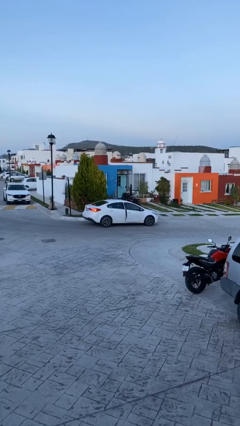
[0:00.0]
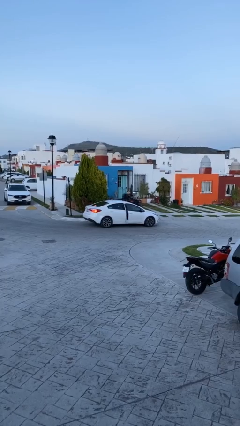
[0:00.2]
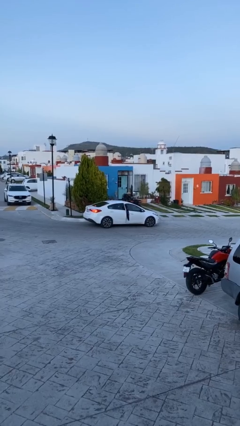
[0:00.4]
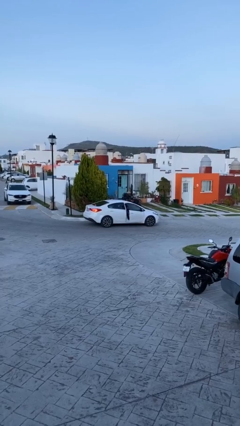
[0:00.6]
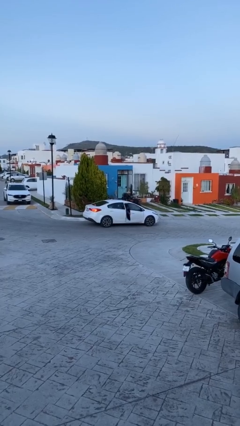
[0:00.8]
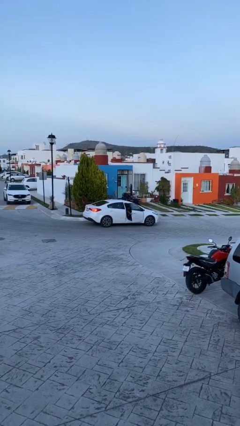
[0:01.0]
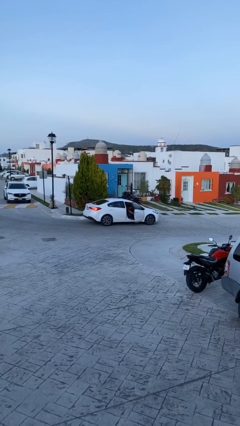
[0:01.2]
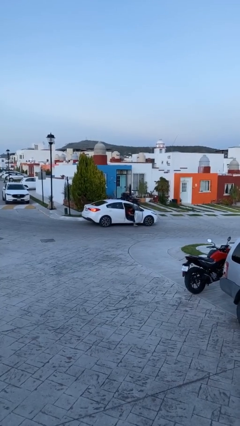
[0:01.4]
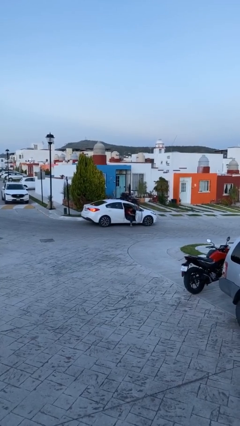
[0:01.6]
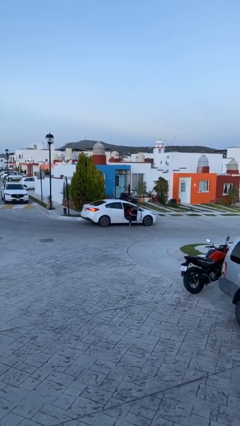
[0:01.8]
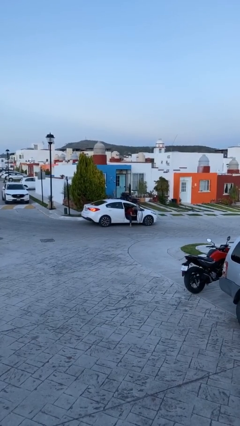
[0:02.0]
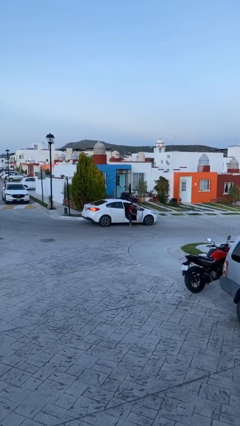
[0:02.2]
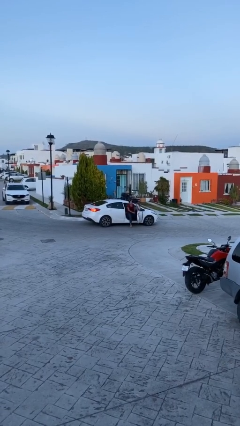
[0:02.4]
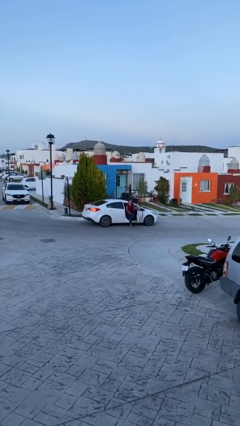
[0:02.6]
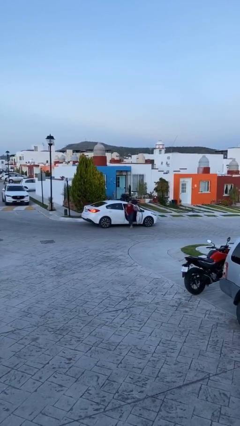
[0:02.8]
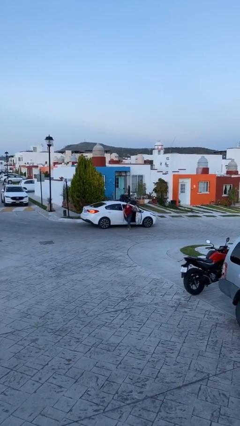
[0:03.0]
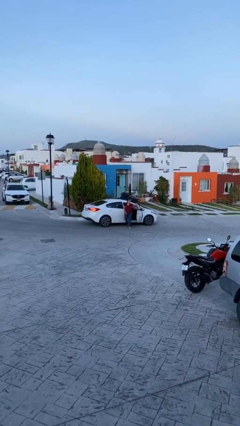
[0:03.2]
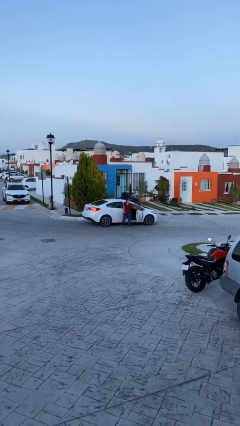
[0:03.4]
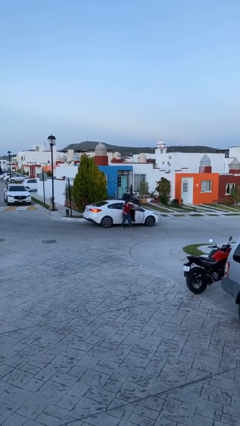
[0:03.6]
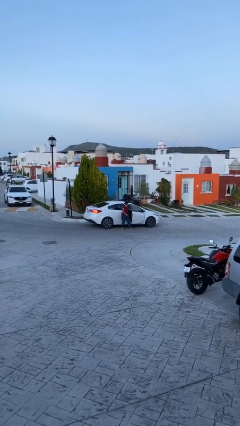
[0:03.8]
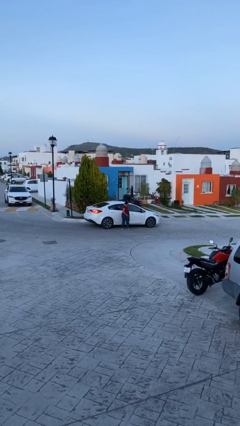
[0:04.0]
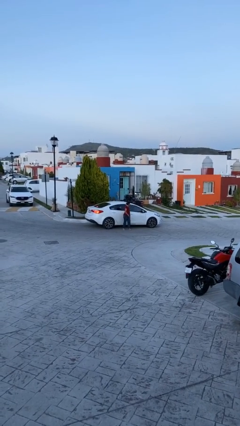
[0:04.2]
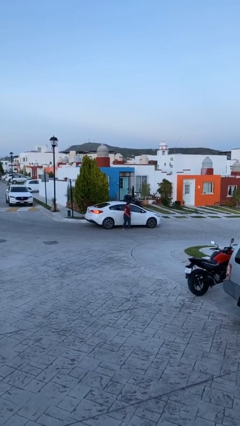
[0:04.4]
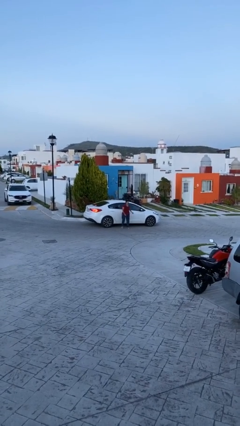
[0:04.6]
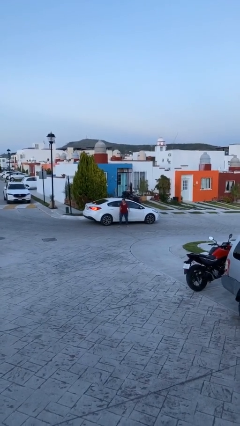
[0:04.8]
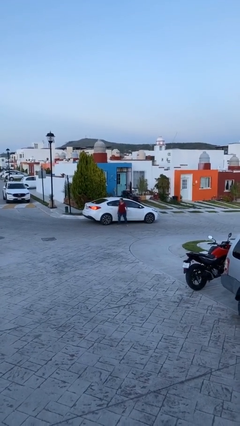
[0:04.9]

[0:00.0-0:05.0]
car drops off person

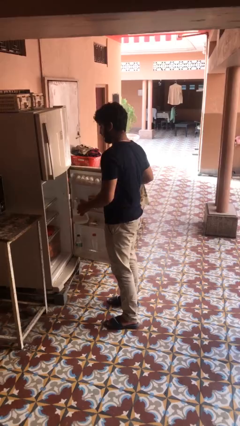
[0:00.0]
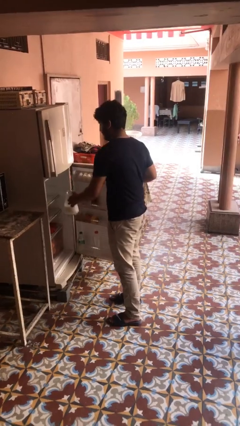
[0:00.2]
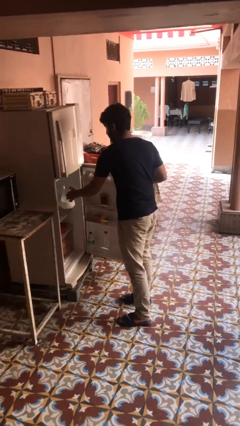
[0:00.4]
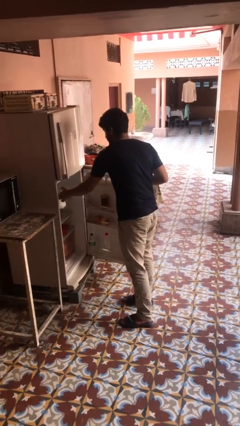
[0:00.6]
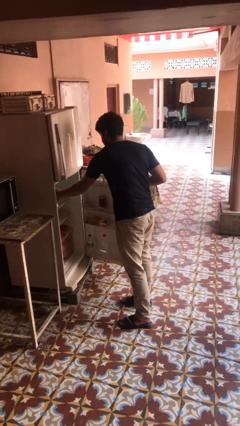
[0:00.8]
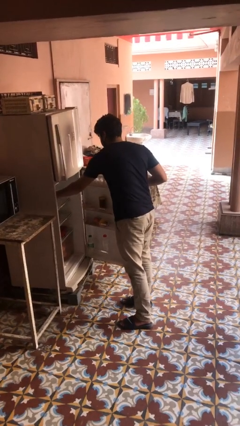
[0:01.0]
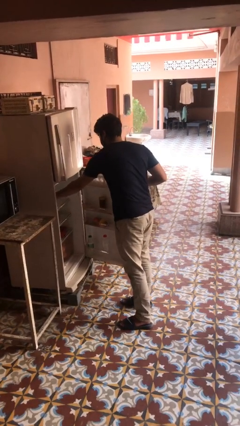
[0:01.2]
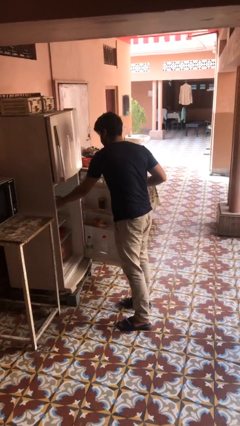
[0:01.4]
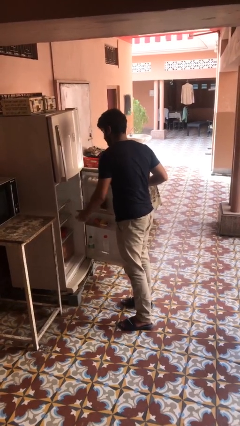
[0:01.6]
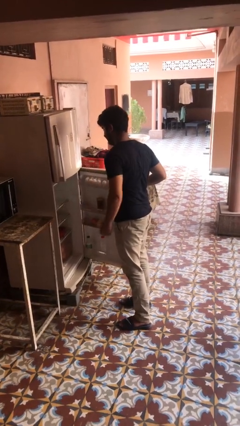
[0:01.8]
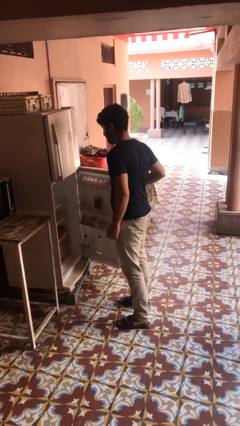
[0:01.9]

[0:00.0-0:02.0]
person puts object into refrigerator

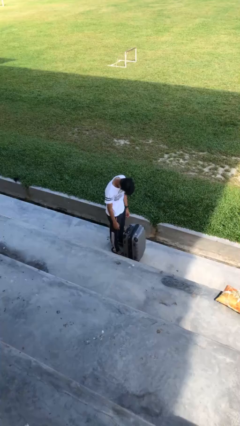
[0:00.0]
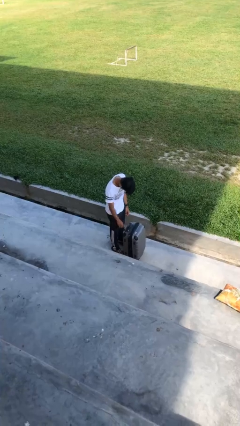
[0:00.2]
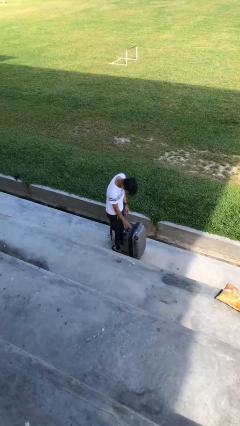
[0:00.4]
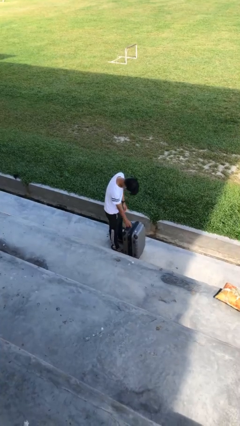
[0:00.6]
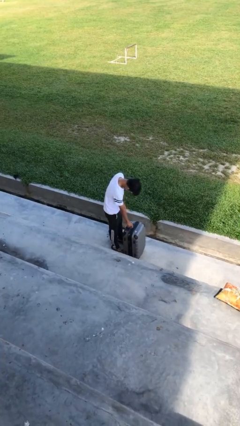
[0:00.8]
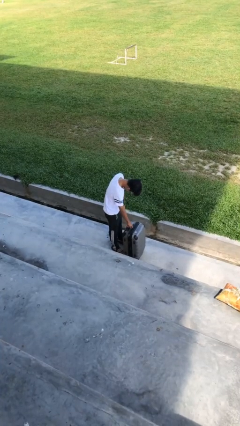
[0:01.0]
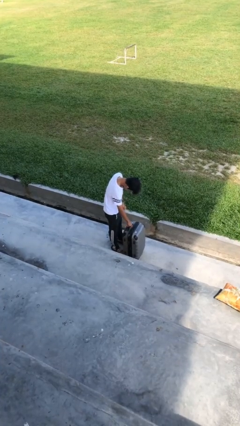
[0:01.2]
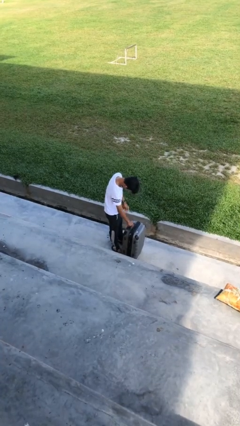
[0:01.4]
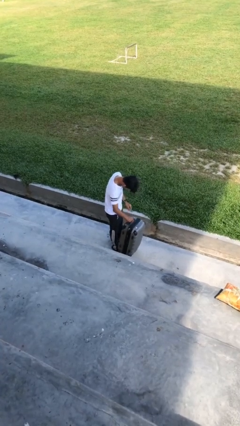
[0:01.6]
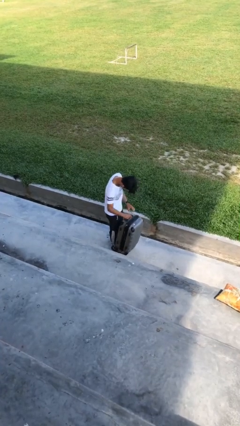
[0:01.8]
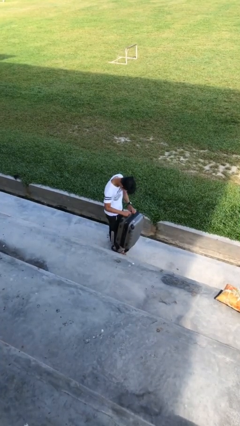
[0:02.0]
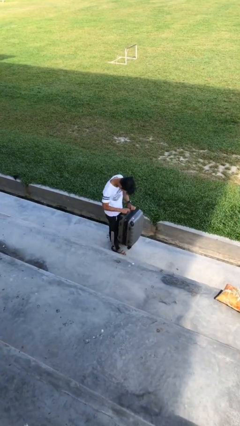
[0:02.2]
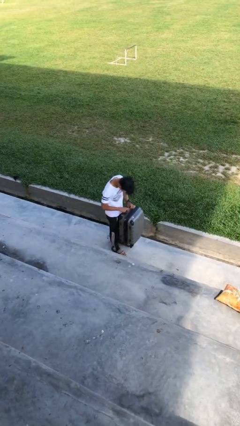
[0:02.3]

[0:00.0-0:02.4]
person picks up object from floor

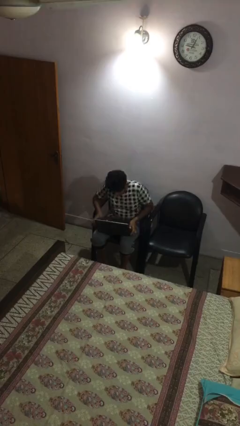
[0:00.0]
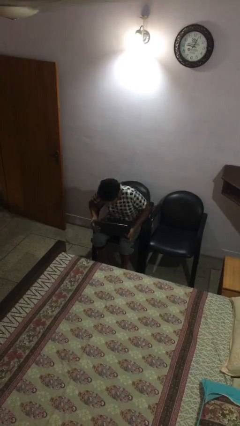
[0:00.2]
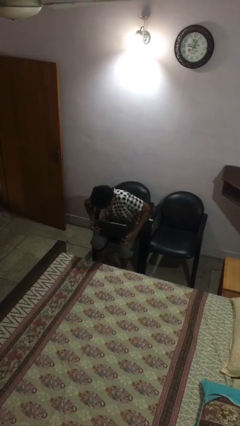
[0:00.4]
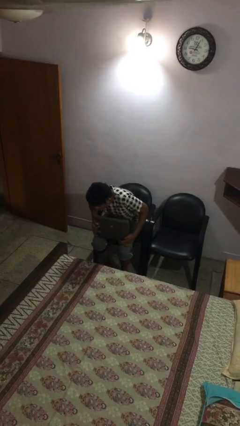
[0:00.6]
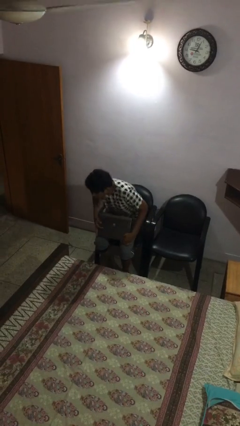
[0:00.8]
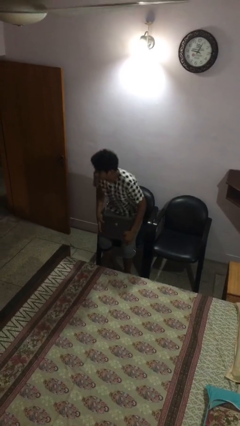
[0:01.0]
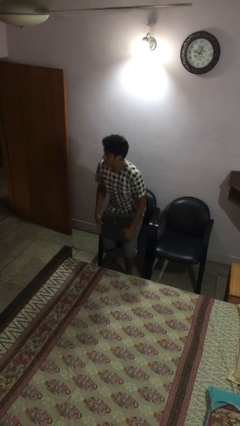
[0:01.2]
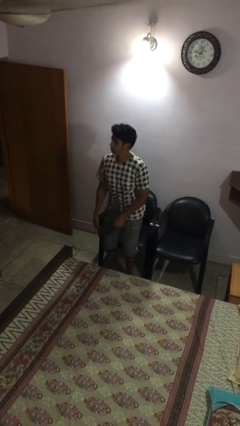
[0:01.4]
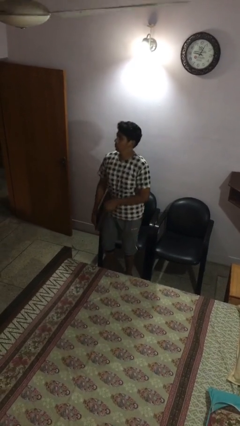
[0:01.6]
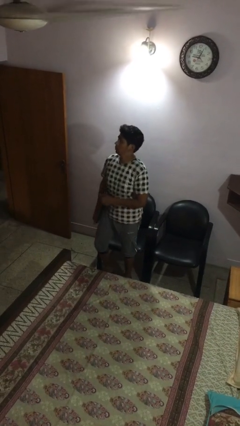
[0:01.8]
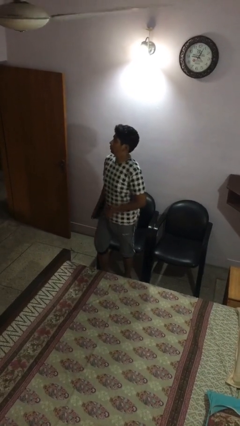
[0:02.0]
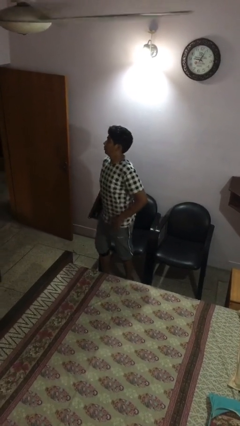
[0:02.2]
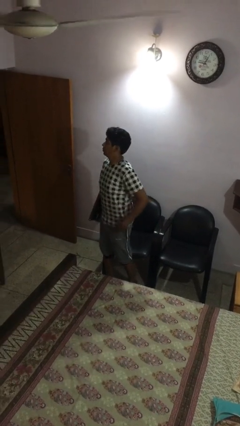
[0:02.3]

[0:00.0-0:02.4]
person stands up

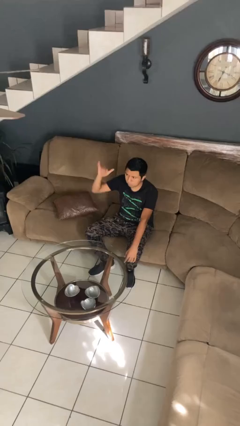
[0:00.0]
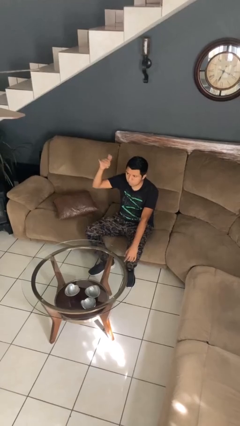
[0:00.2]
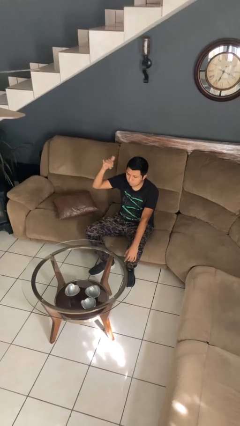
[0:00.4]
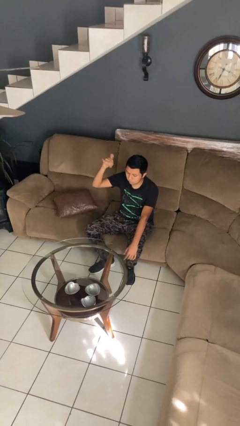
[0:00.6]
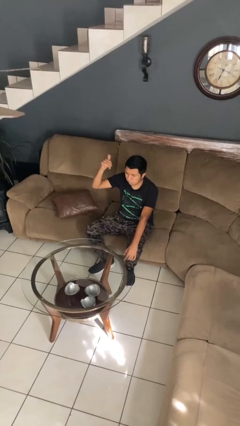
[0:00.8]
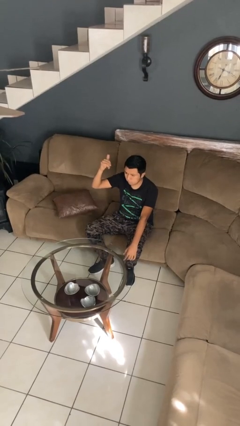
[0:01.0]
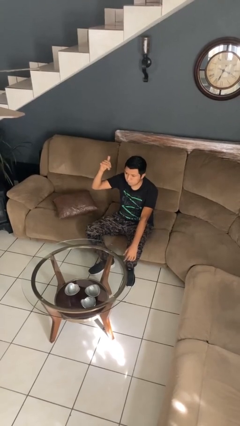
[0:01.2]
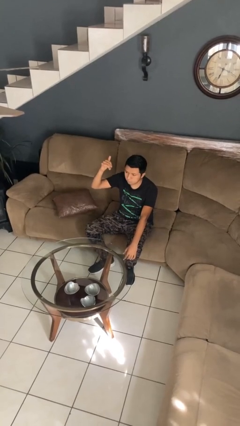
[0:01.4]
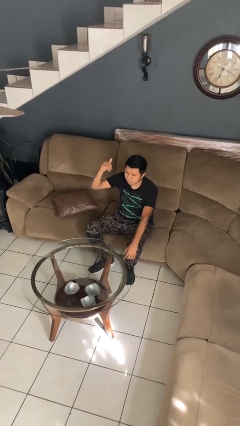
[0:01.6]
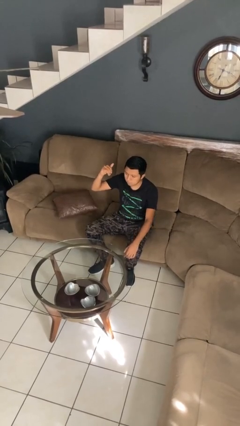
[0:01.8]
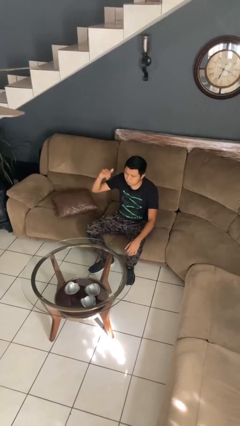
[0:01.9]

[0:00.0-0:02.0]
person gestures hang loose

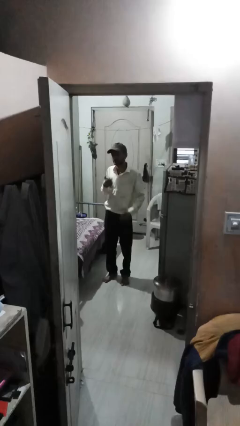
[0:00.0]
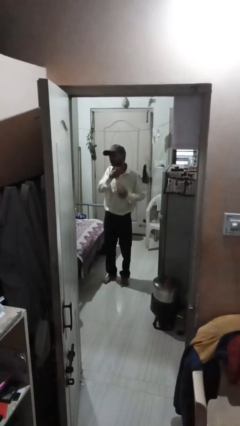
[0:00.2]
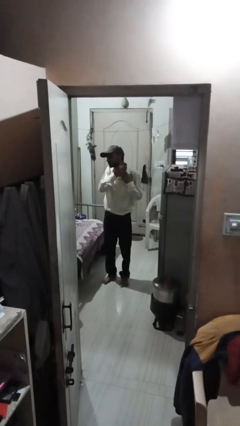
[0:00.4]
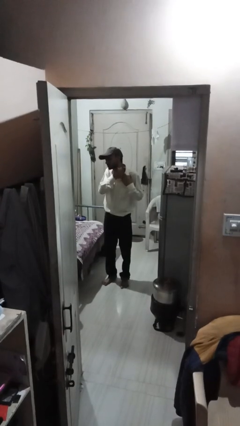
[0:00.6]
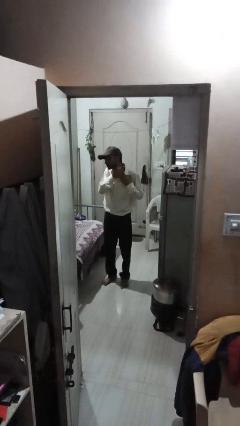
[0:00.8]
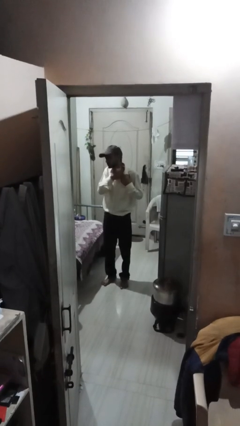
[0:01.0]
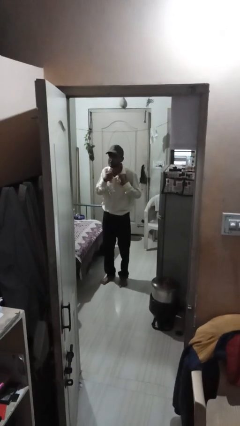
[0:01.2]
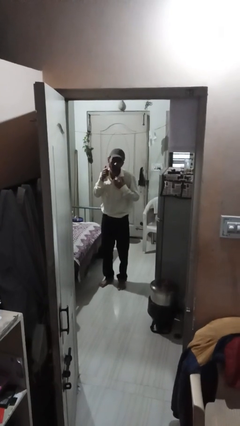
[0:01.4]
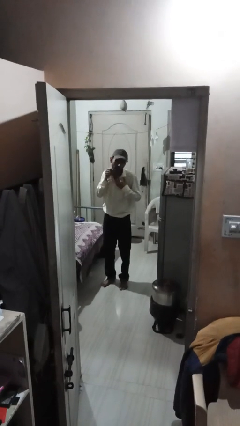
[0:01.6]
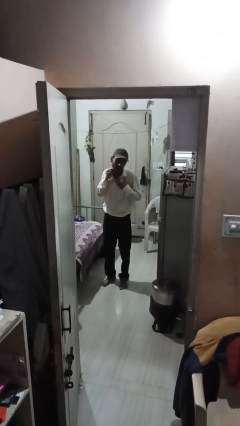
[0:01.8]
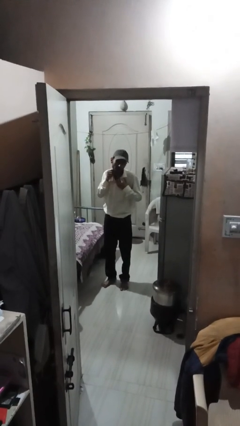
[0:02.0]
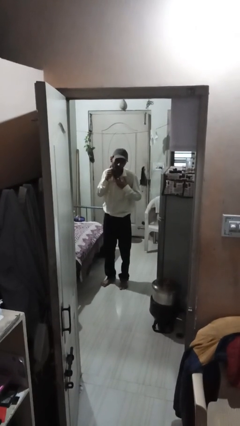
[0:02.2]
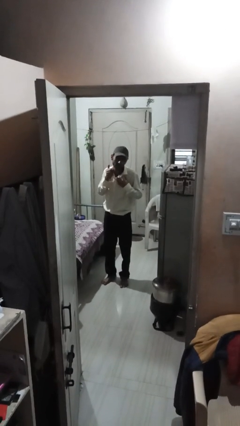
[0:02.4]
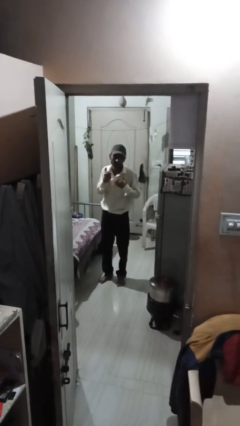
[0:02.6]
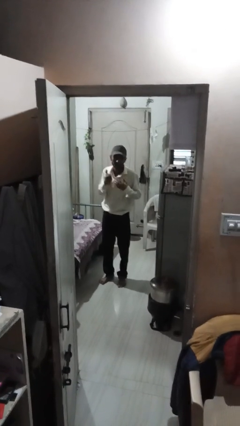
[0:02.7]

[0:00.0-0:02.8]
person applies deodorant

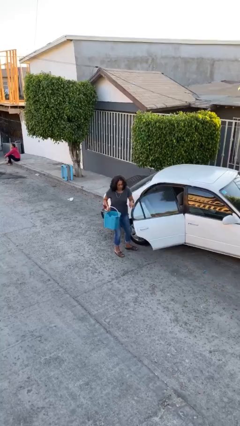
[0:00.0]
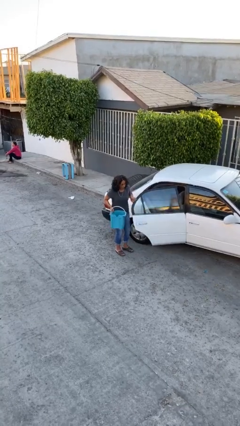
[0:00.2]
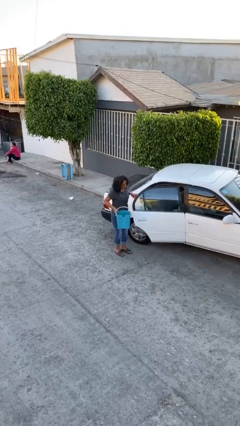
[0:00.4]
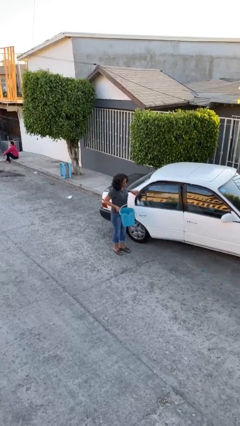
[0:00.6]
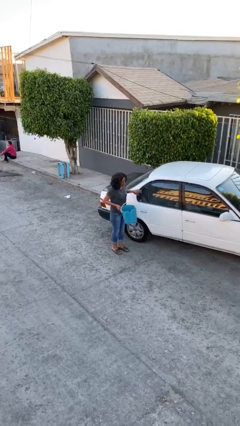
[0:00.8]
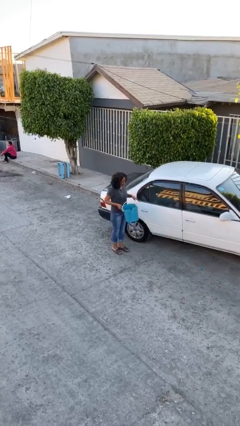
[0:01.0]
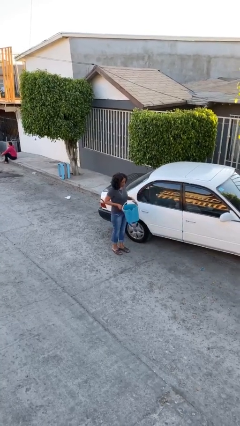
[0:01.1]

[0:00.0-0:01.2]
person closes car door
